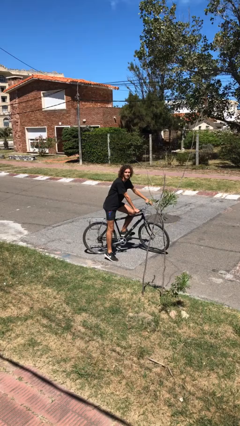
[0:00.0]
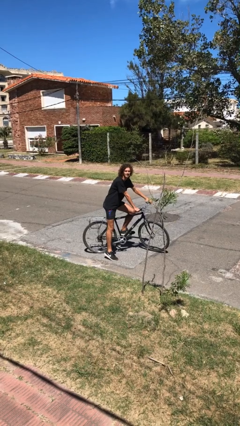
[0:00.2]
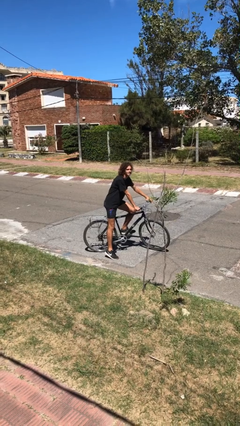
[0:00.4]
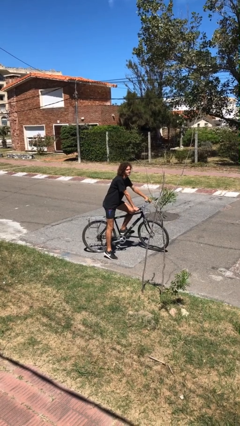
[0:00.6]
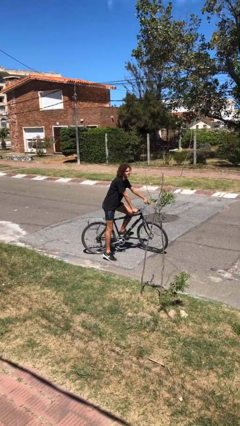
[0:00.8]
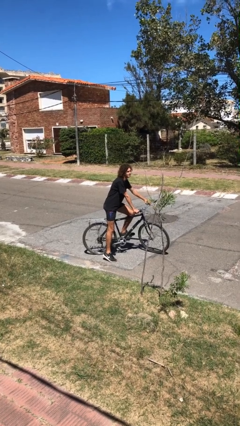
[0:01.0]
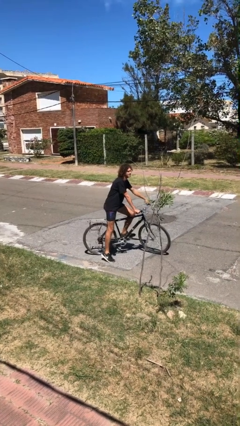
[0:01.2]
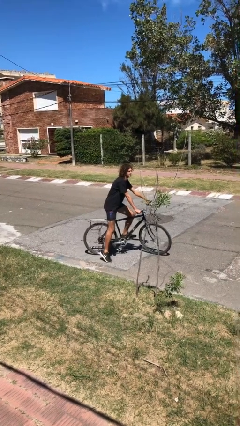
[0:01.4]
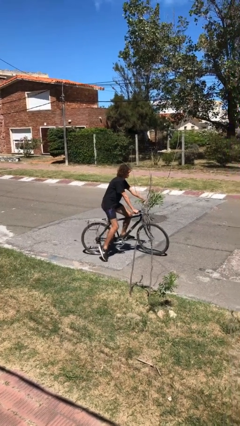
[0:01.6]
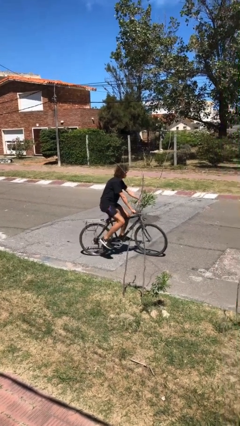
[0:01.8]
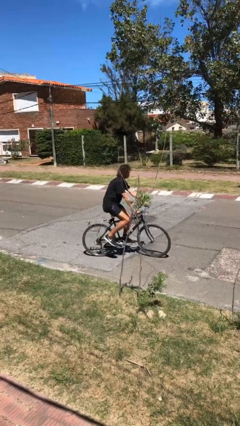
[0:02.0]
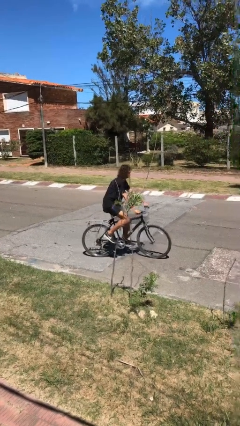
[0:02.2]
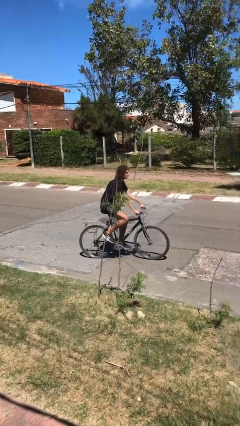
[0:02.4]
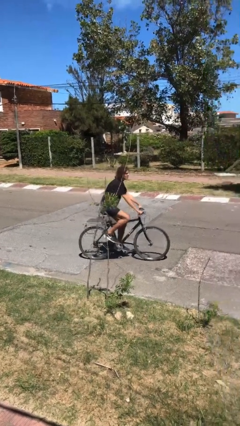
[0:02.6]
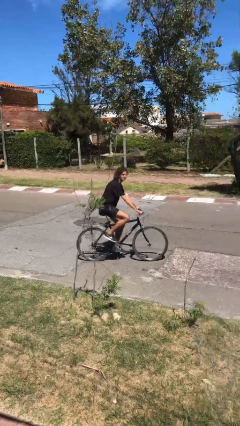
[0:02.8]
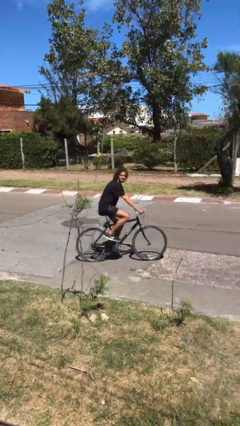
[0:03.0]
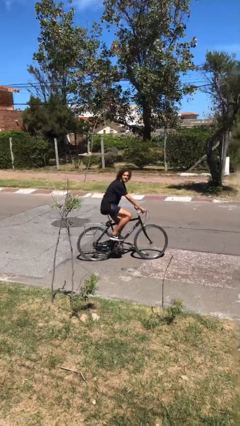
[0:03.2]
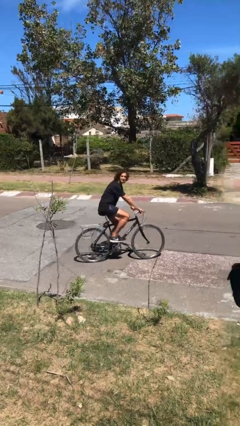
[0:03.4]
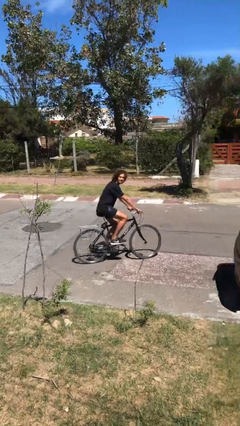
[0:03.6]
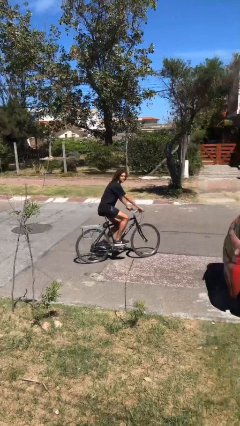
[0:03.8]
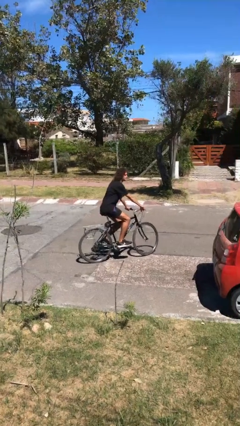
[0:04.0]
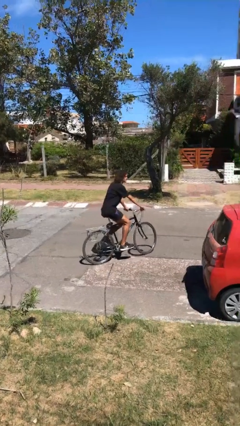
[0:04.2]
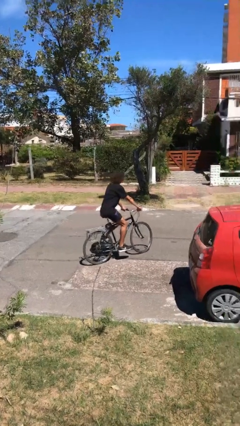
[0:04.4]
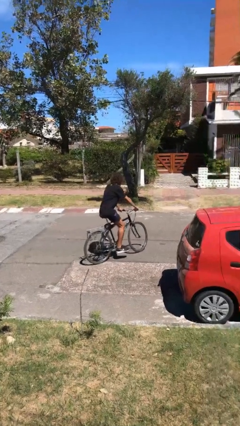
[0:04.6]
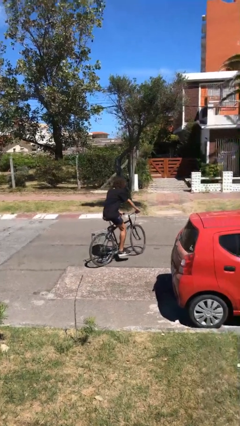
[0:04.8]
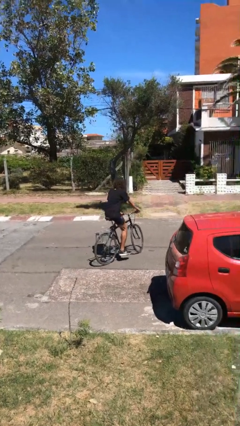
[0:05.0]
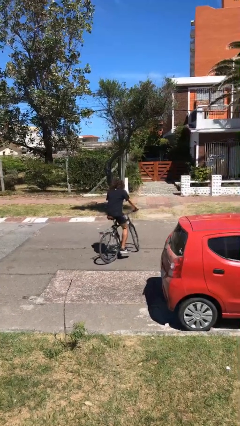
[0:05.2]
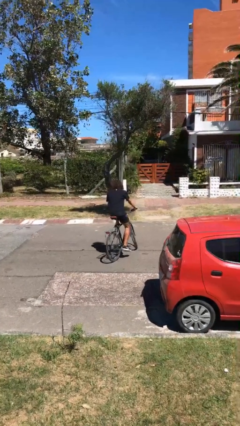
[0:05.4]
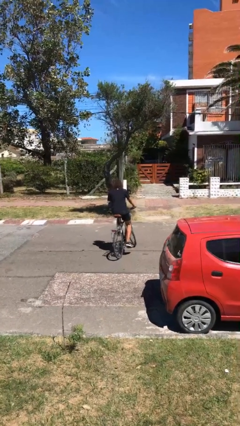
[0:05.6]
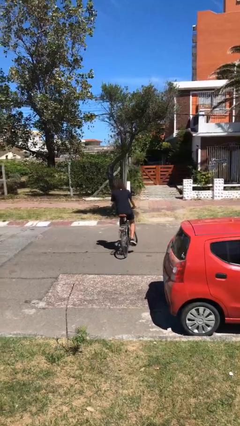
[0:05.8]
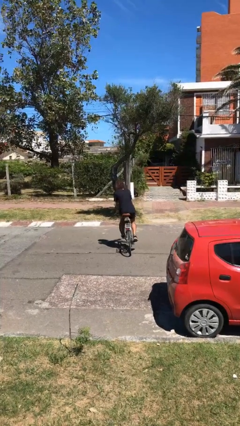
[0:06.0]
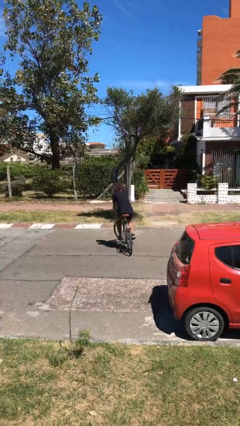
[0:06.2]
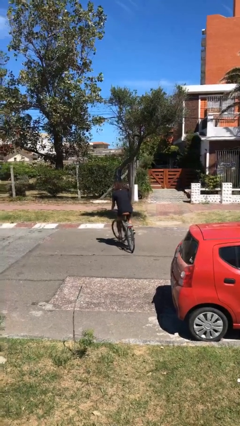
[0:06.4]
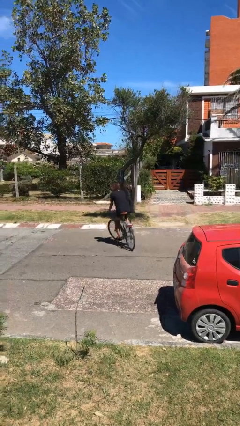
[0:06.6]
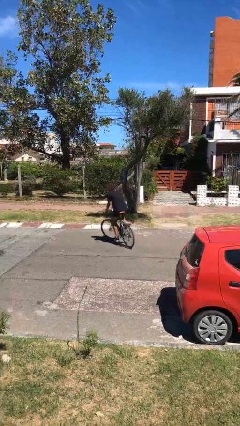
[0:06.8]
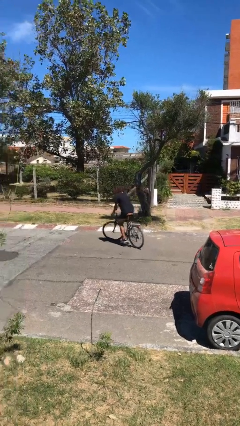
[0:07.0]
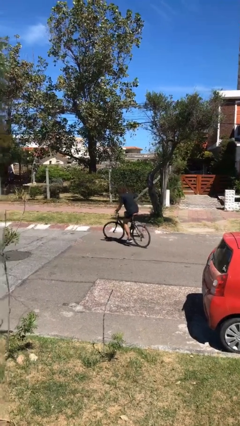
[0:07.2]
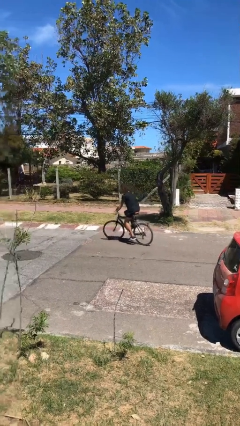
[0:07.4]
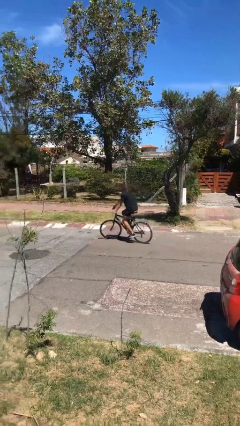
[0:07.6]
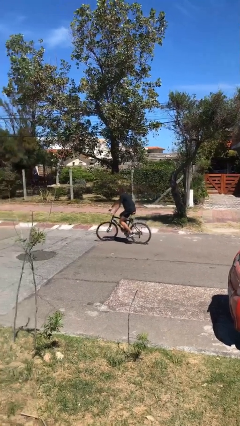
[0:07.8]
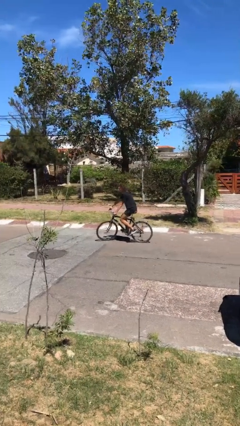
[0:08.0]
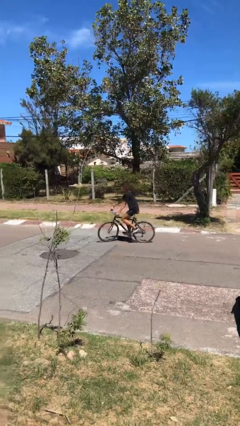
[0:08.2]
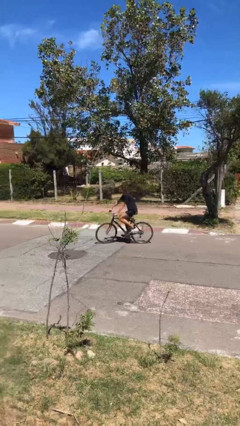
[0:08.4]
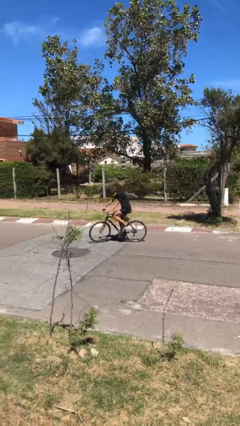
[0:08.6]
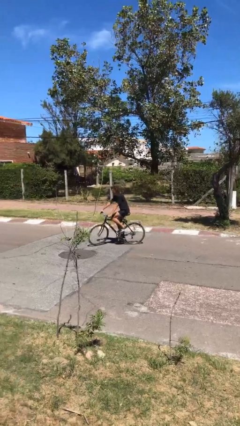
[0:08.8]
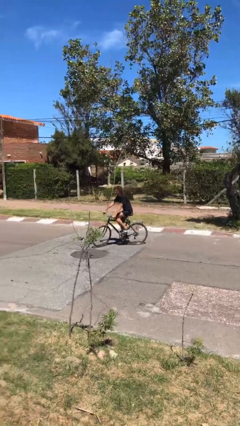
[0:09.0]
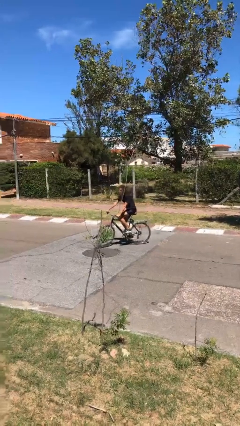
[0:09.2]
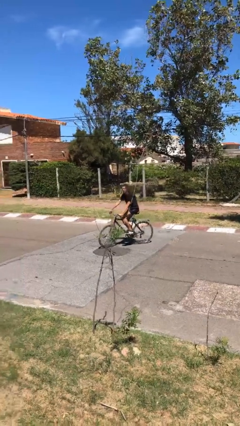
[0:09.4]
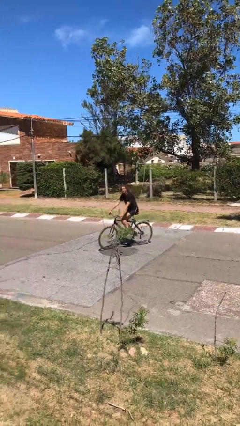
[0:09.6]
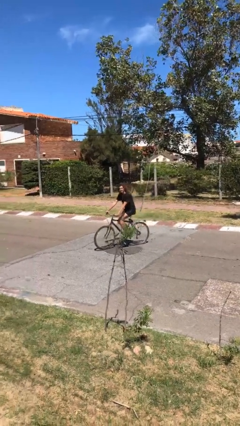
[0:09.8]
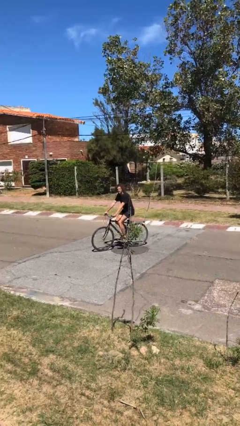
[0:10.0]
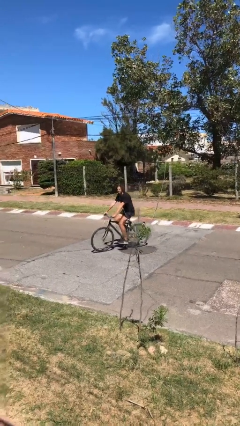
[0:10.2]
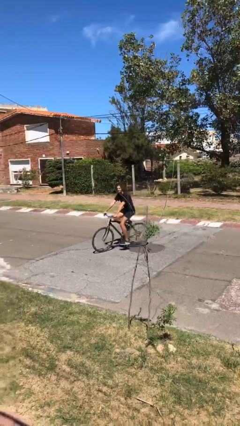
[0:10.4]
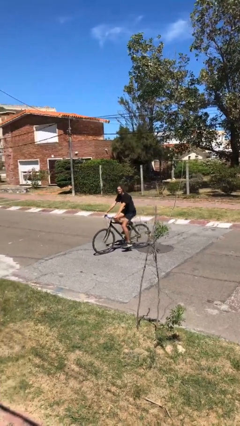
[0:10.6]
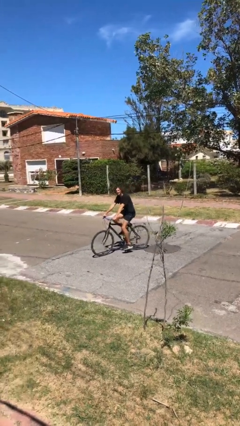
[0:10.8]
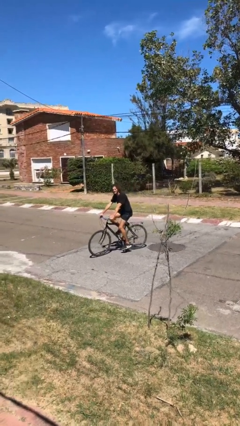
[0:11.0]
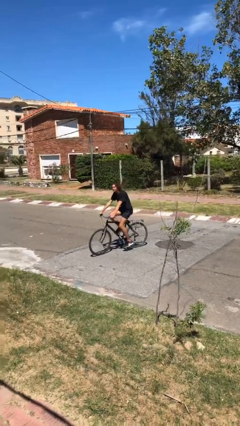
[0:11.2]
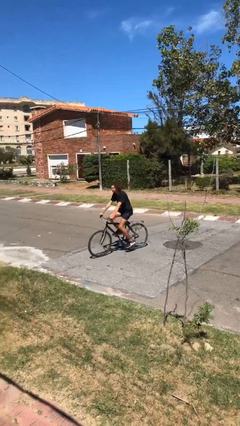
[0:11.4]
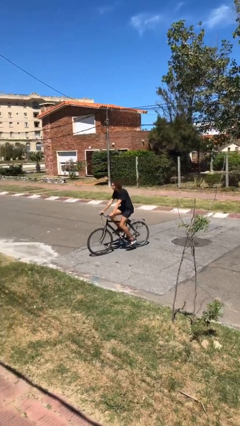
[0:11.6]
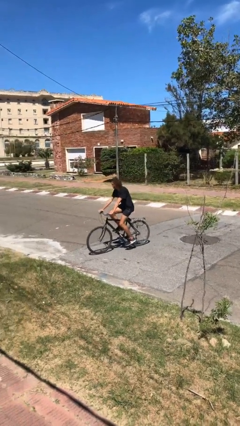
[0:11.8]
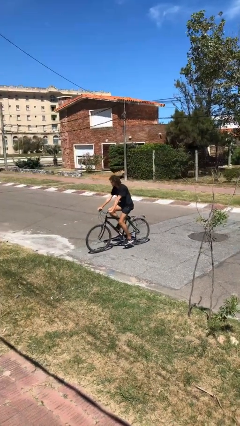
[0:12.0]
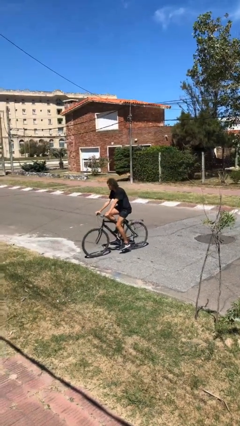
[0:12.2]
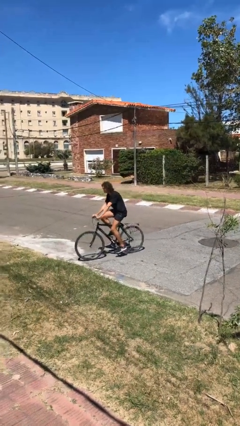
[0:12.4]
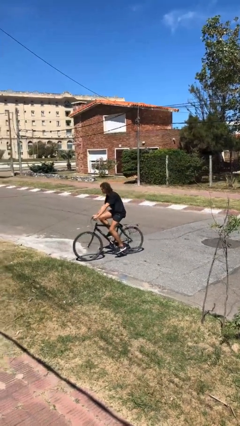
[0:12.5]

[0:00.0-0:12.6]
person rides bicycle

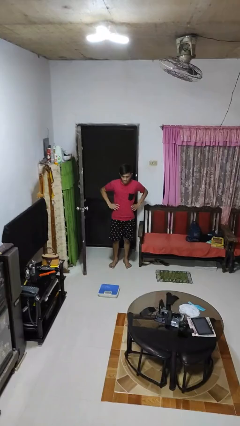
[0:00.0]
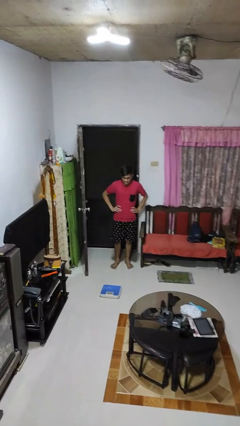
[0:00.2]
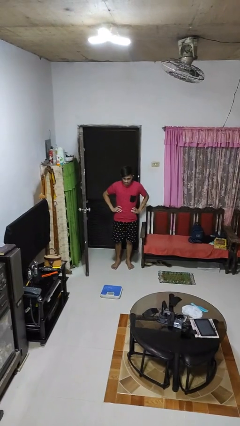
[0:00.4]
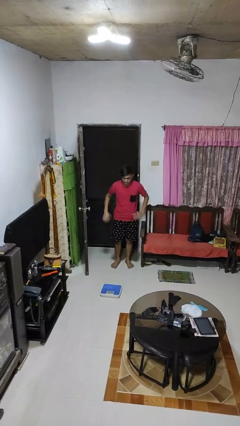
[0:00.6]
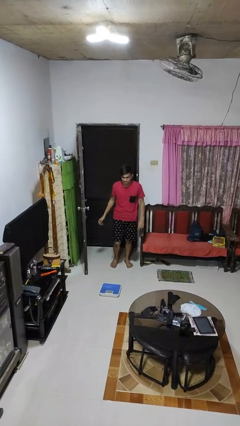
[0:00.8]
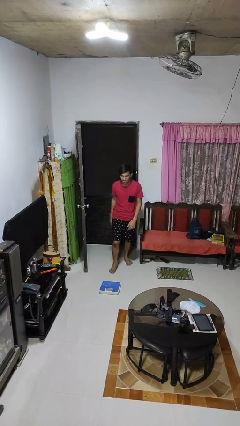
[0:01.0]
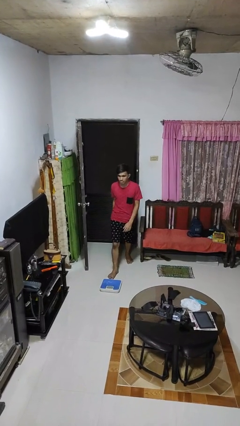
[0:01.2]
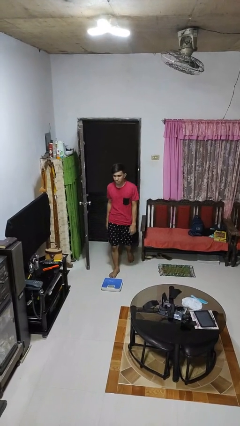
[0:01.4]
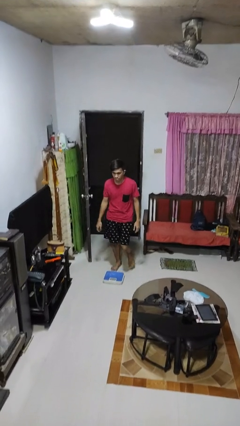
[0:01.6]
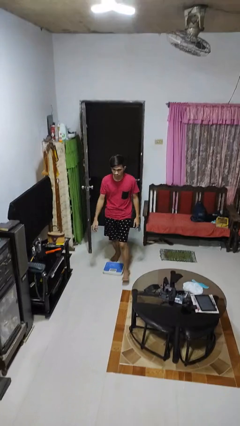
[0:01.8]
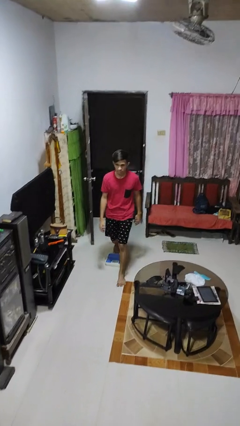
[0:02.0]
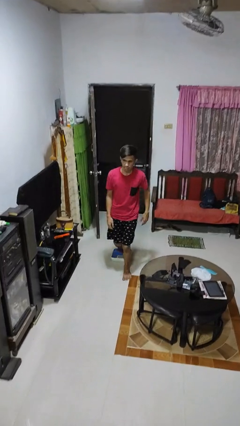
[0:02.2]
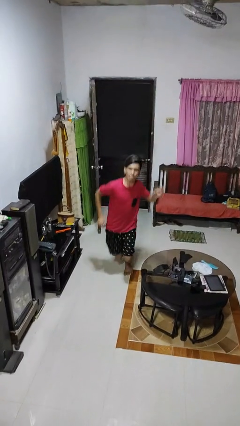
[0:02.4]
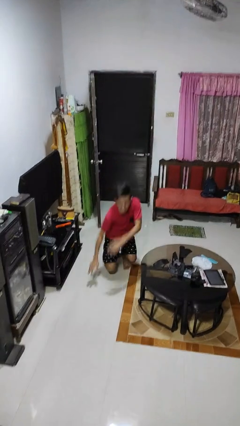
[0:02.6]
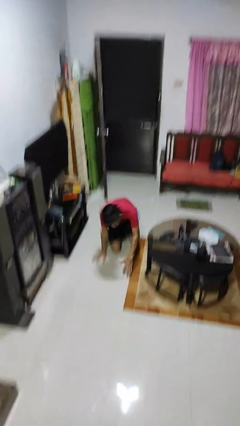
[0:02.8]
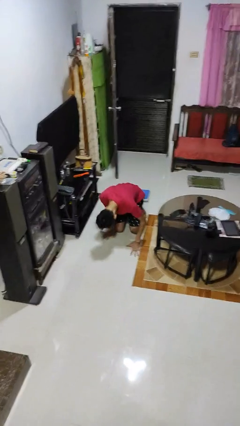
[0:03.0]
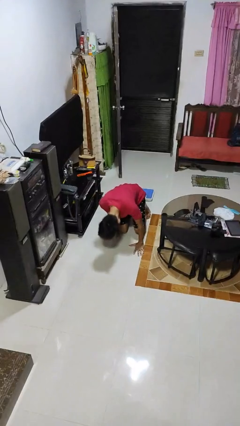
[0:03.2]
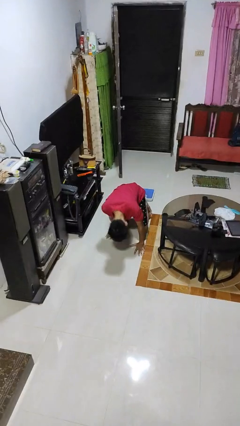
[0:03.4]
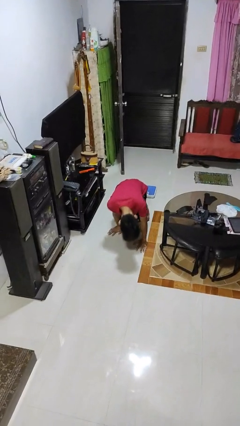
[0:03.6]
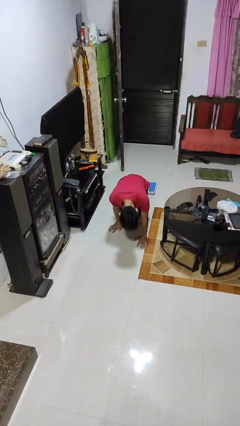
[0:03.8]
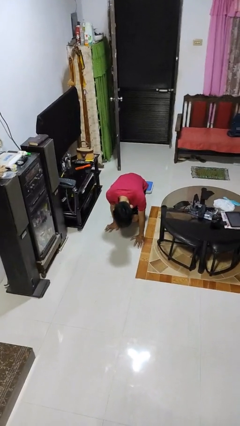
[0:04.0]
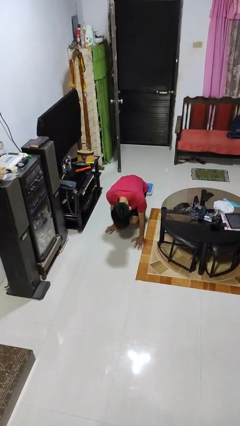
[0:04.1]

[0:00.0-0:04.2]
person trips on object on floor

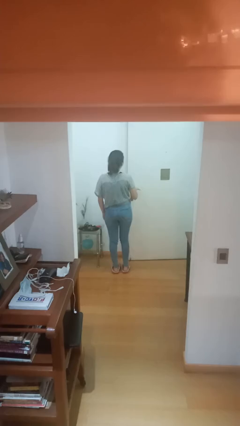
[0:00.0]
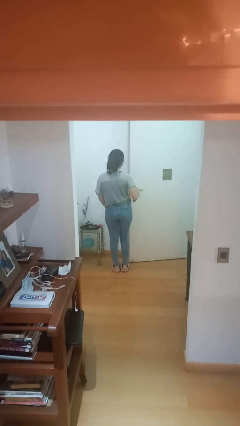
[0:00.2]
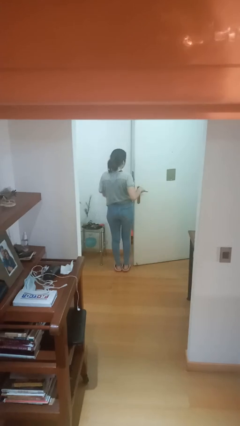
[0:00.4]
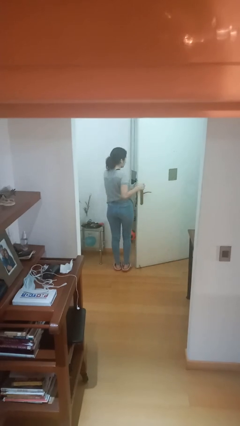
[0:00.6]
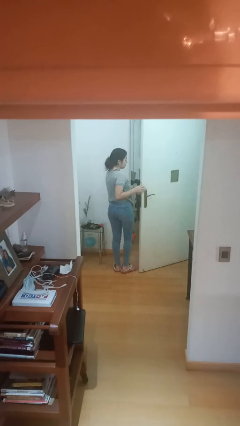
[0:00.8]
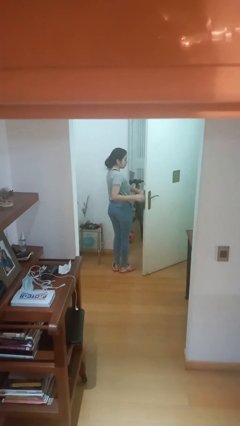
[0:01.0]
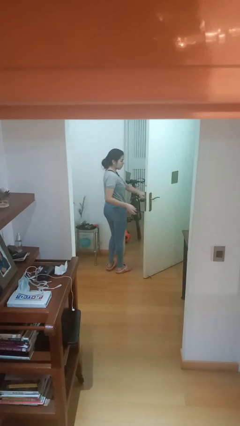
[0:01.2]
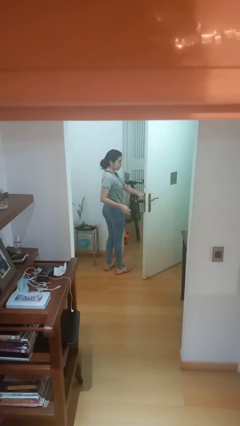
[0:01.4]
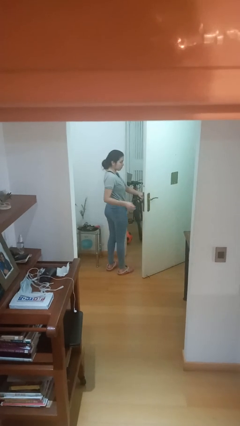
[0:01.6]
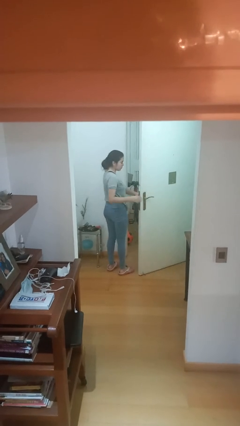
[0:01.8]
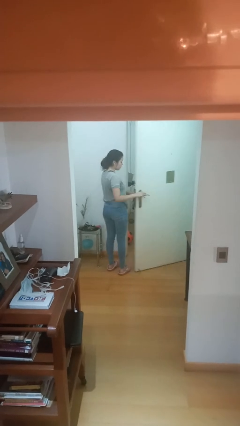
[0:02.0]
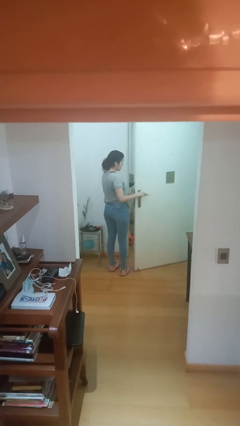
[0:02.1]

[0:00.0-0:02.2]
person opens facility door
